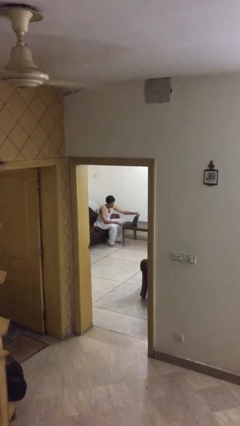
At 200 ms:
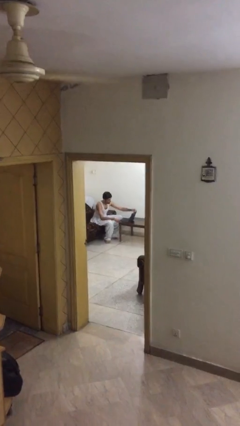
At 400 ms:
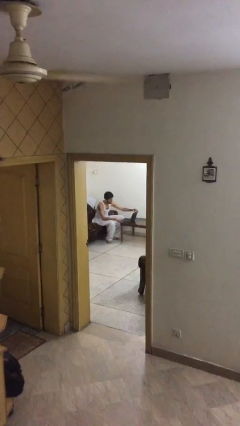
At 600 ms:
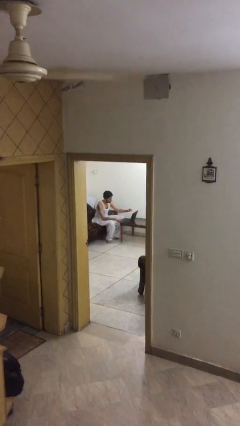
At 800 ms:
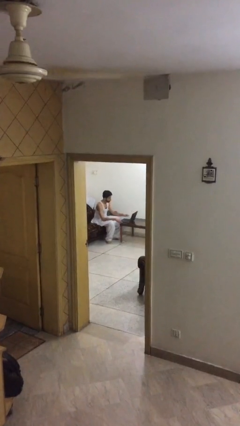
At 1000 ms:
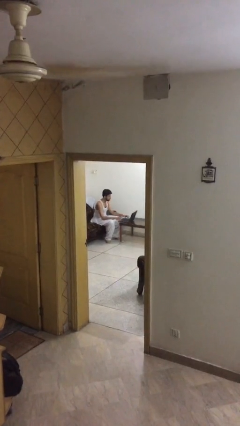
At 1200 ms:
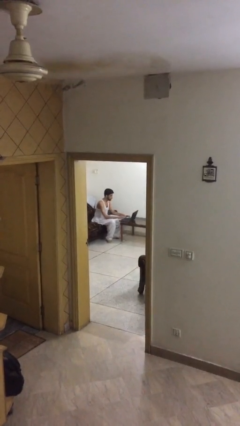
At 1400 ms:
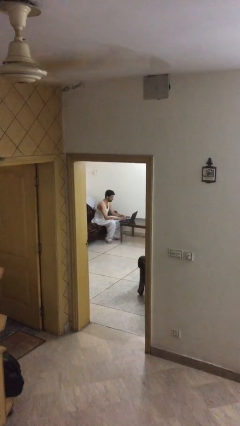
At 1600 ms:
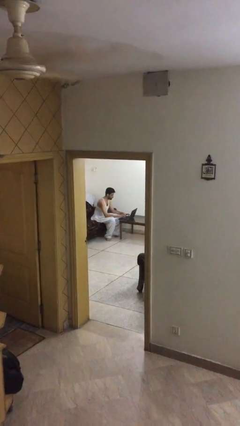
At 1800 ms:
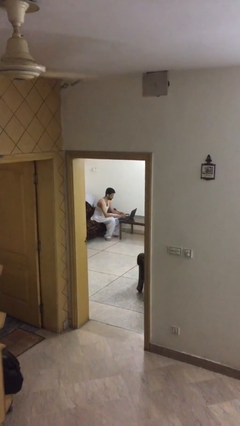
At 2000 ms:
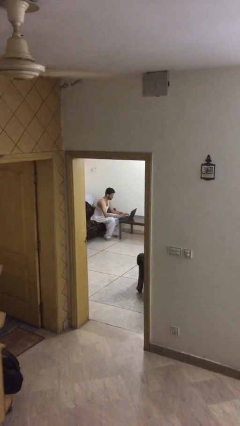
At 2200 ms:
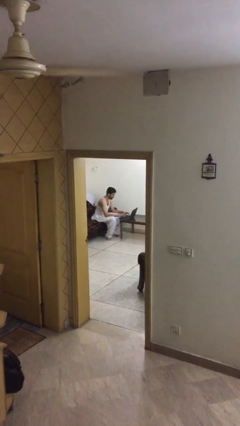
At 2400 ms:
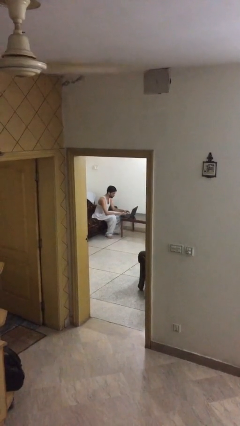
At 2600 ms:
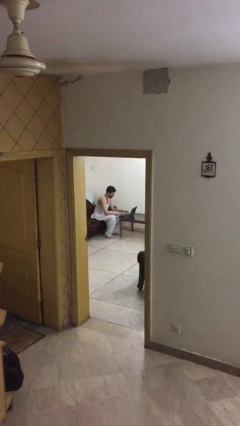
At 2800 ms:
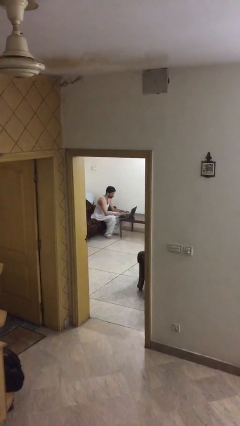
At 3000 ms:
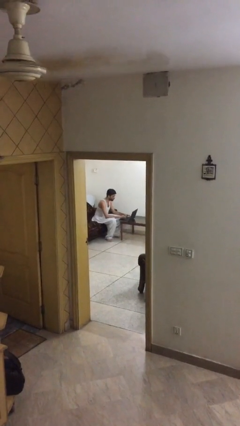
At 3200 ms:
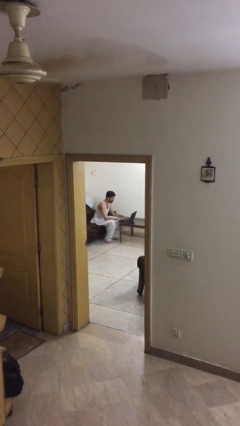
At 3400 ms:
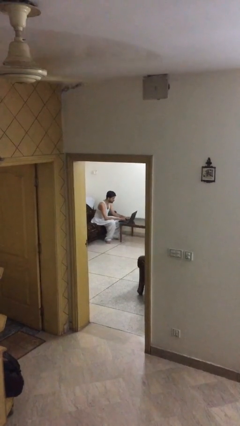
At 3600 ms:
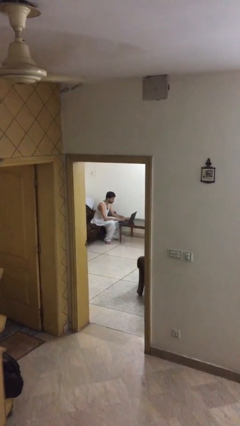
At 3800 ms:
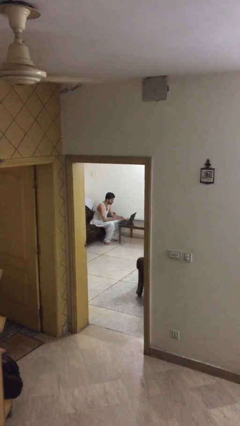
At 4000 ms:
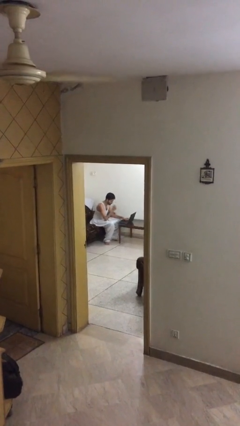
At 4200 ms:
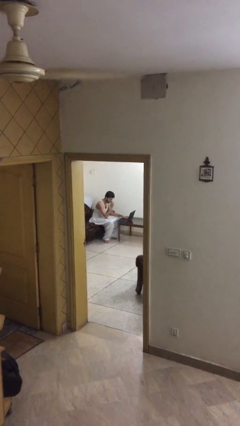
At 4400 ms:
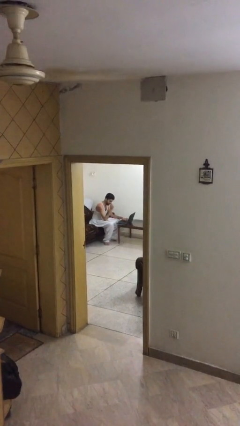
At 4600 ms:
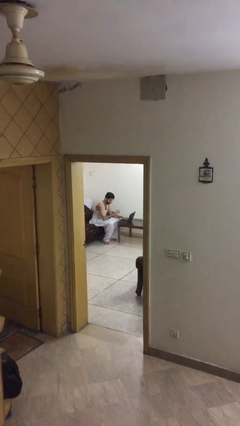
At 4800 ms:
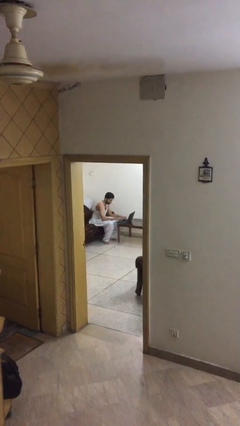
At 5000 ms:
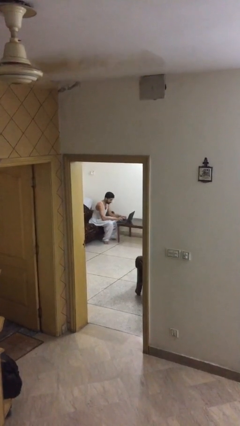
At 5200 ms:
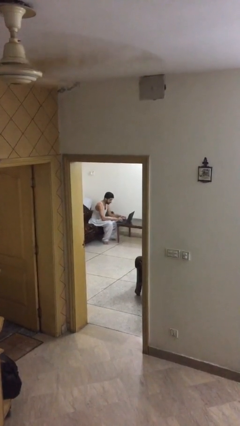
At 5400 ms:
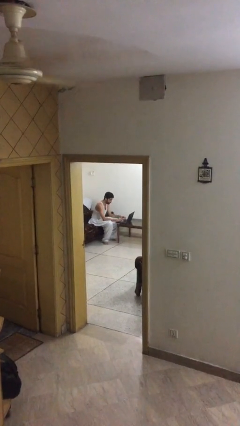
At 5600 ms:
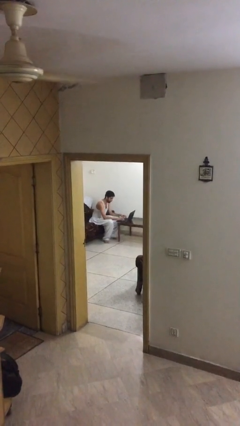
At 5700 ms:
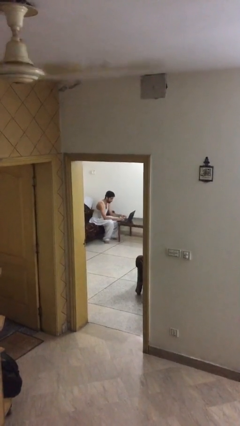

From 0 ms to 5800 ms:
person interacts with laptop

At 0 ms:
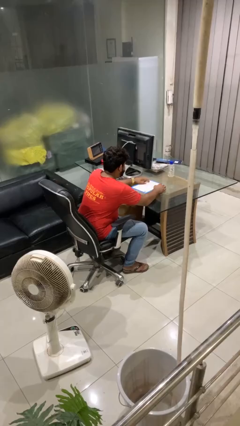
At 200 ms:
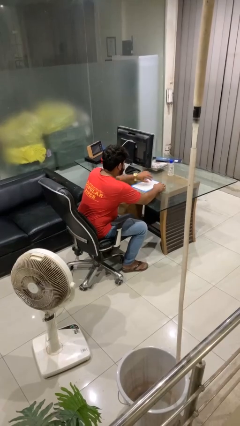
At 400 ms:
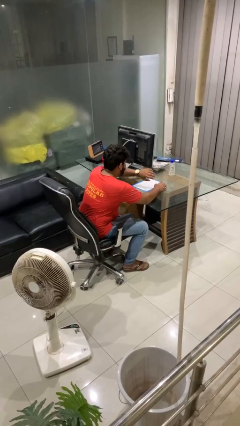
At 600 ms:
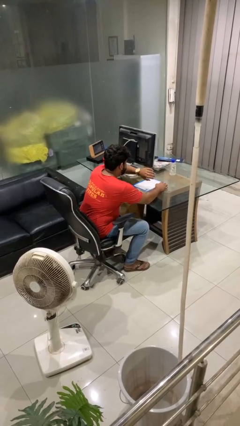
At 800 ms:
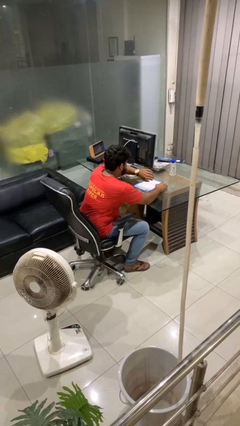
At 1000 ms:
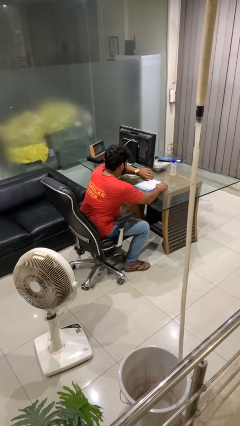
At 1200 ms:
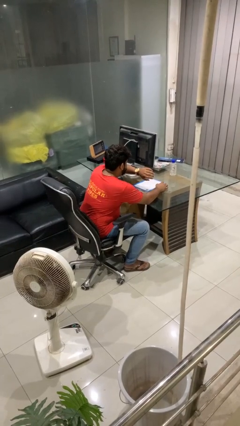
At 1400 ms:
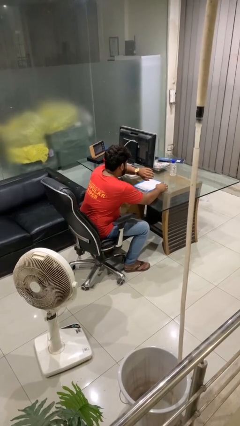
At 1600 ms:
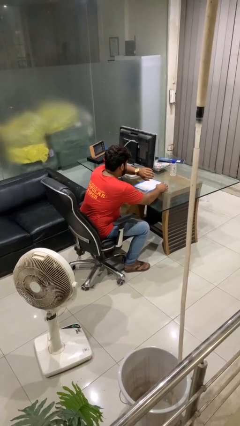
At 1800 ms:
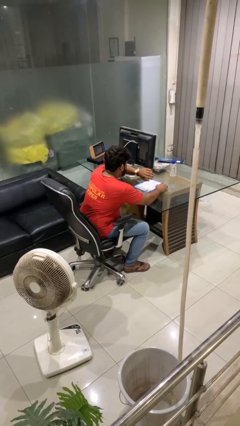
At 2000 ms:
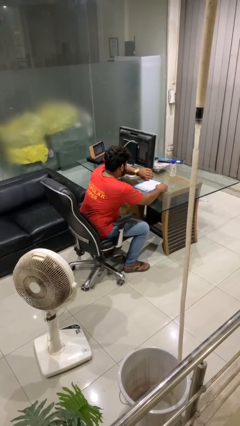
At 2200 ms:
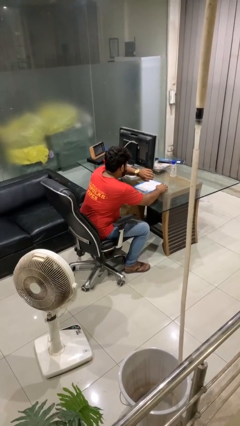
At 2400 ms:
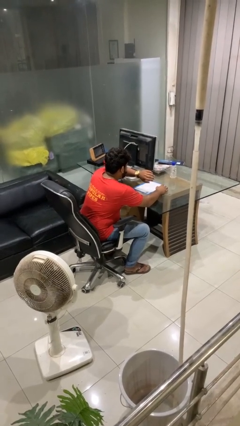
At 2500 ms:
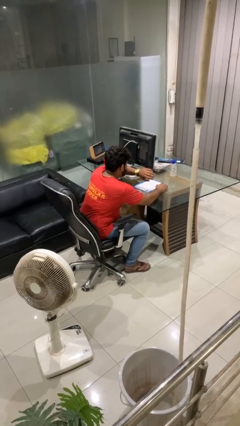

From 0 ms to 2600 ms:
person looks at wristwatch

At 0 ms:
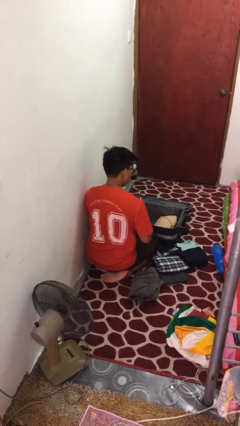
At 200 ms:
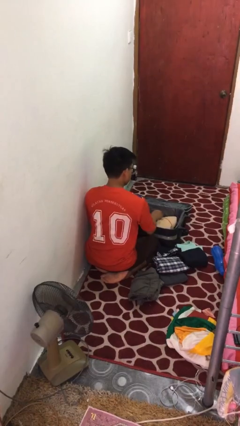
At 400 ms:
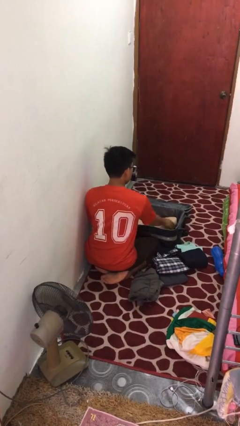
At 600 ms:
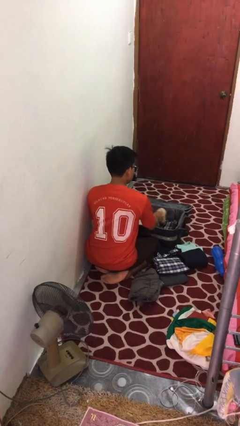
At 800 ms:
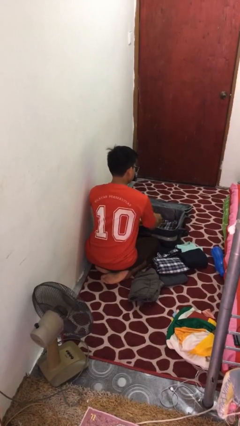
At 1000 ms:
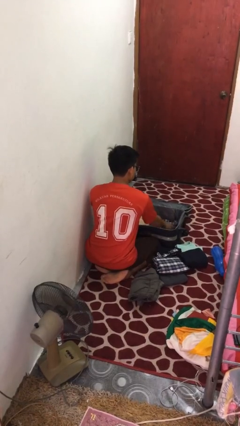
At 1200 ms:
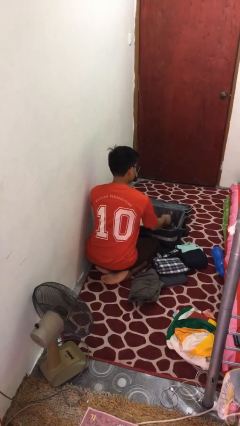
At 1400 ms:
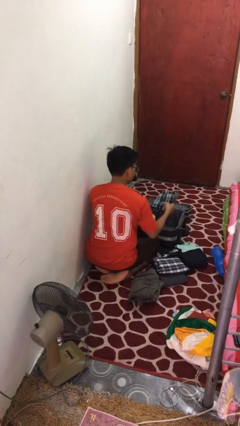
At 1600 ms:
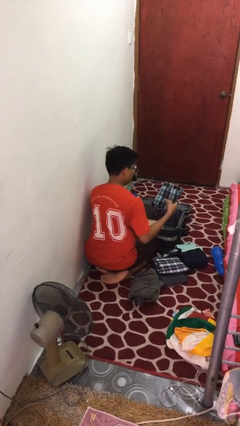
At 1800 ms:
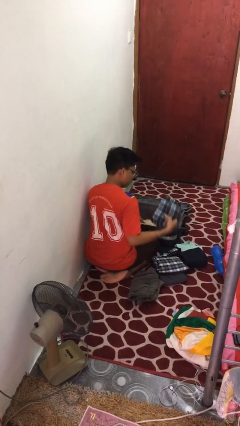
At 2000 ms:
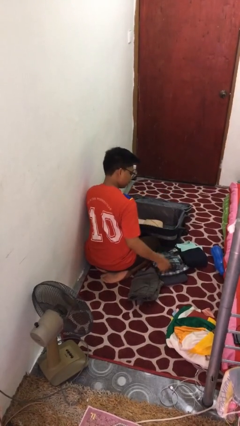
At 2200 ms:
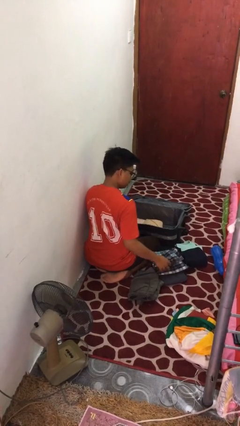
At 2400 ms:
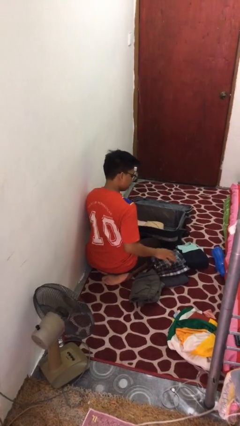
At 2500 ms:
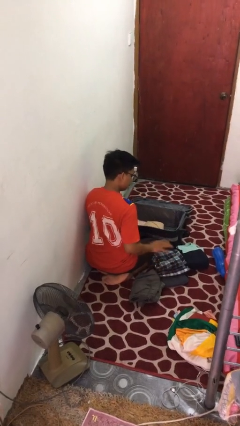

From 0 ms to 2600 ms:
person unloads clothes from suitcase

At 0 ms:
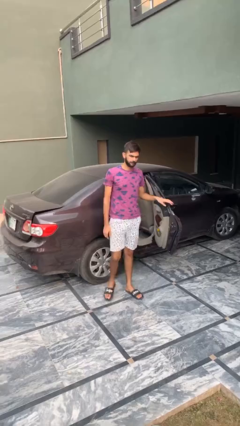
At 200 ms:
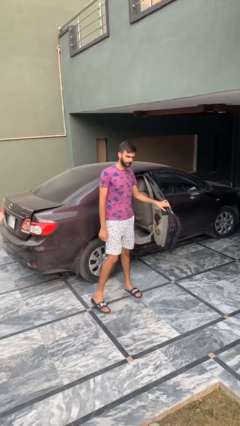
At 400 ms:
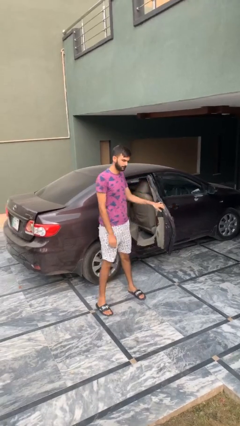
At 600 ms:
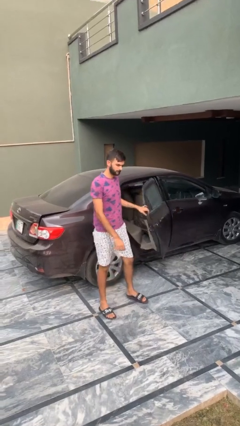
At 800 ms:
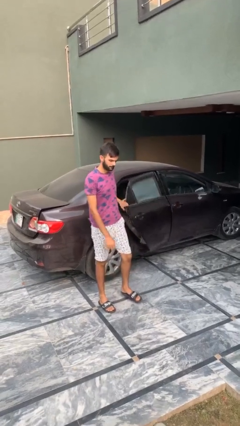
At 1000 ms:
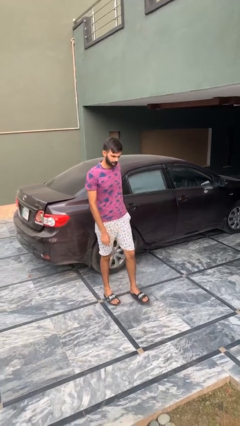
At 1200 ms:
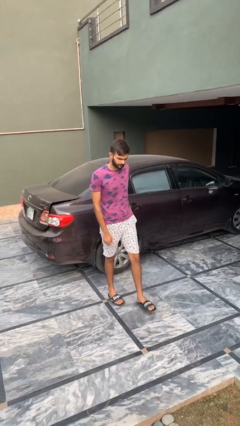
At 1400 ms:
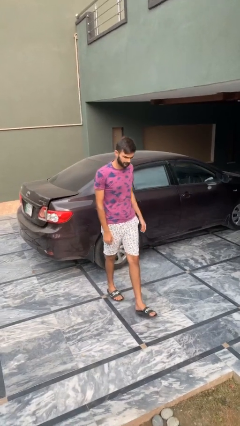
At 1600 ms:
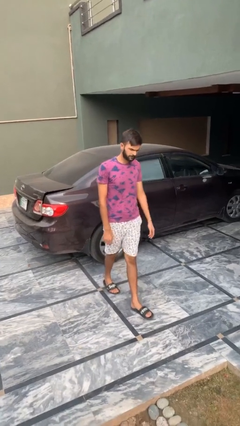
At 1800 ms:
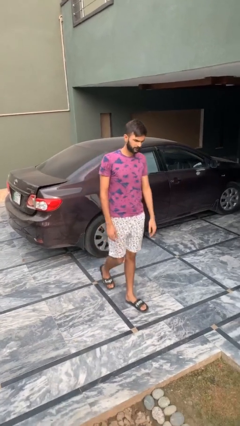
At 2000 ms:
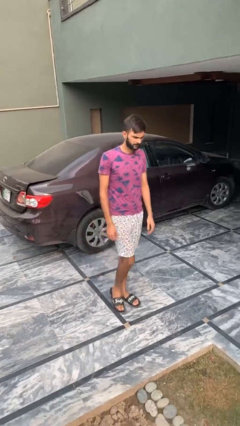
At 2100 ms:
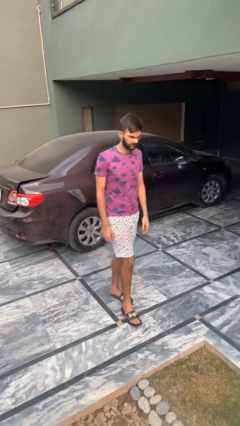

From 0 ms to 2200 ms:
person closes car door

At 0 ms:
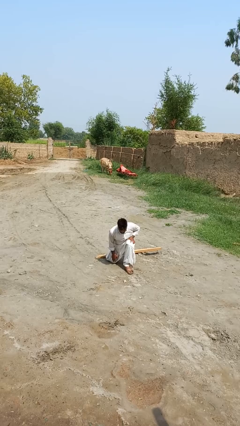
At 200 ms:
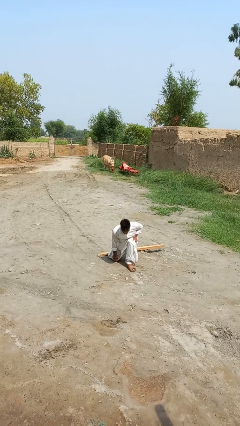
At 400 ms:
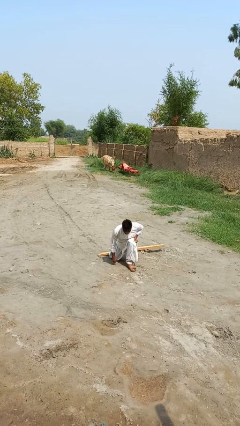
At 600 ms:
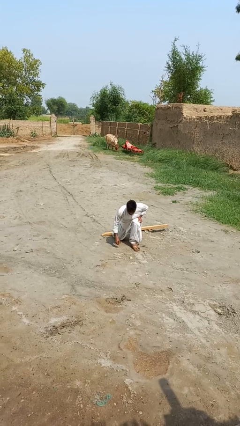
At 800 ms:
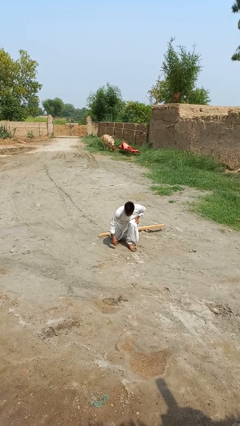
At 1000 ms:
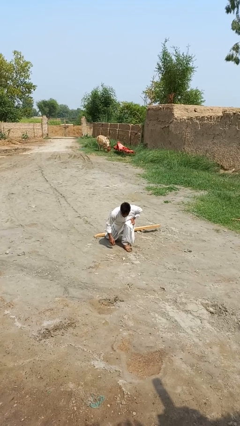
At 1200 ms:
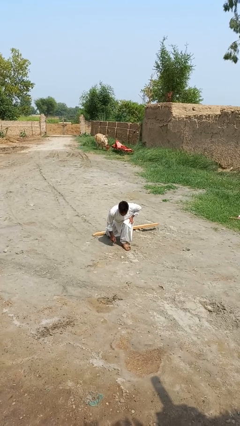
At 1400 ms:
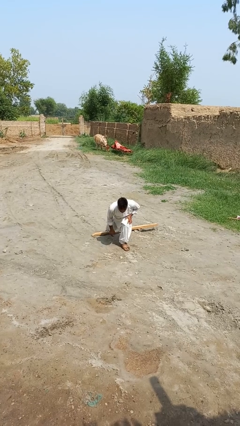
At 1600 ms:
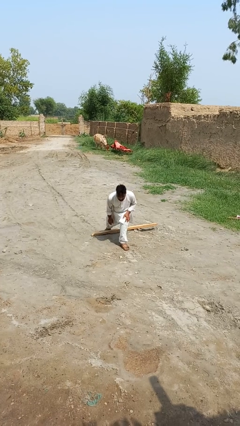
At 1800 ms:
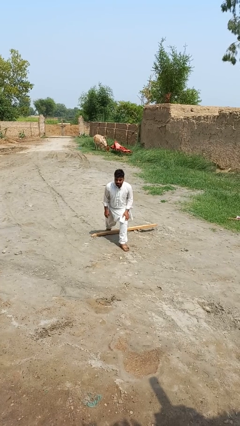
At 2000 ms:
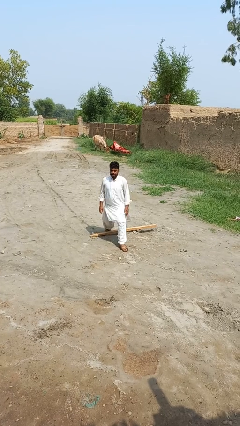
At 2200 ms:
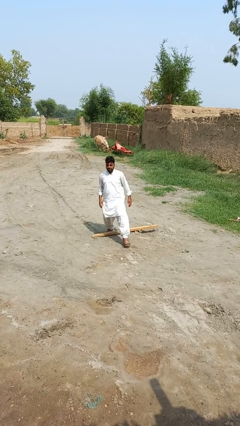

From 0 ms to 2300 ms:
person stands up from floor

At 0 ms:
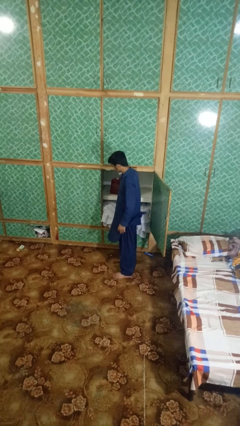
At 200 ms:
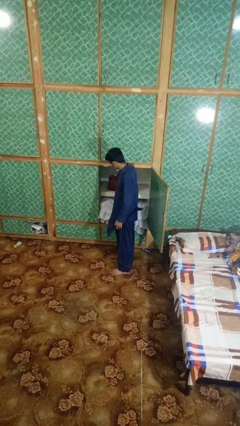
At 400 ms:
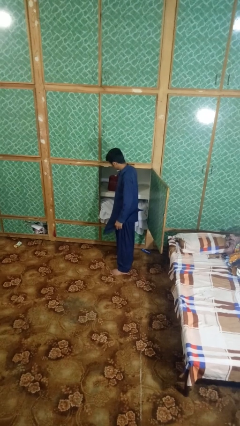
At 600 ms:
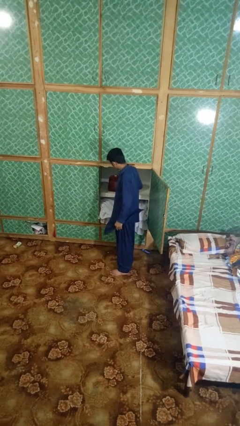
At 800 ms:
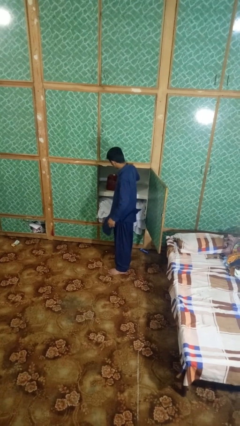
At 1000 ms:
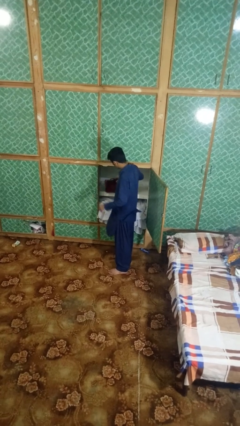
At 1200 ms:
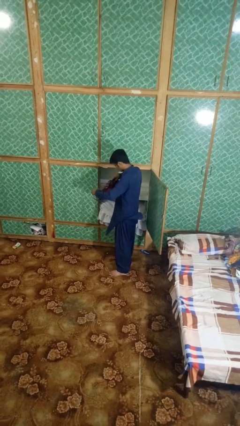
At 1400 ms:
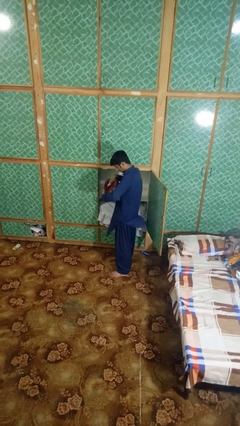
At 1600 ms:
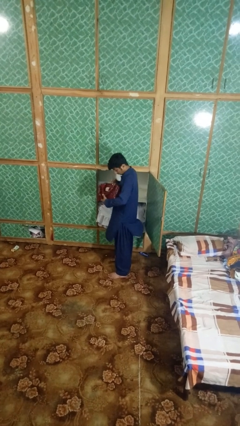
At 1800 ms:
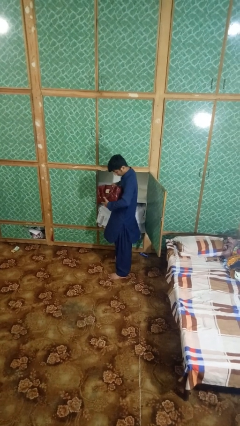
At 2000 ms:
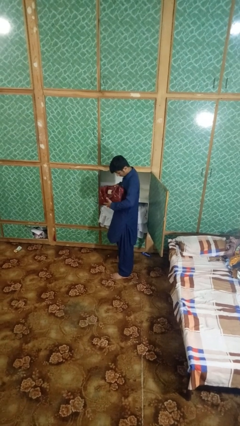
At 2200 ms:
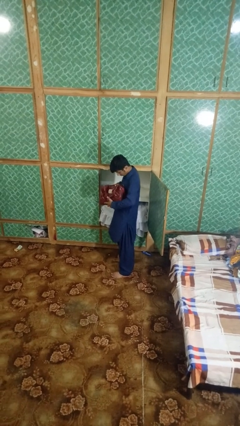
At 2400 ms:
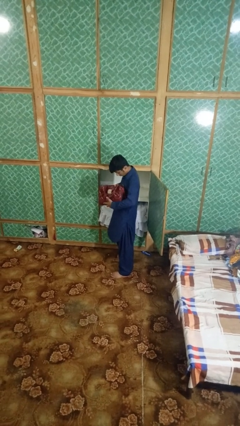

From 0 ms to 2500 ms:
person searches in purse
